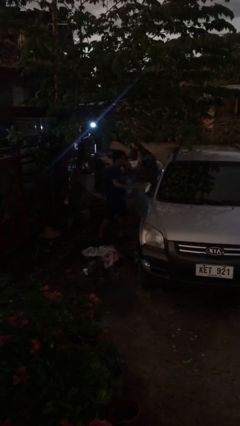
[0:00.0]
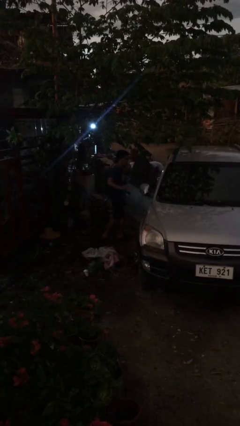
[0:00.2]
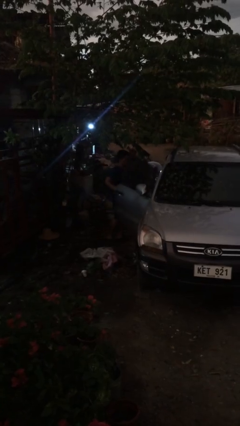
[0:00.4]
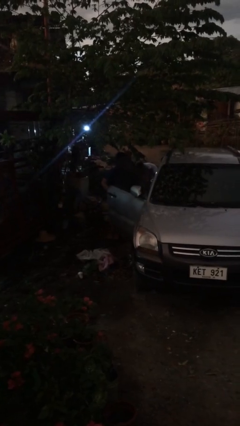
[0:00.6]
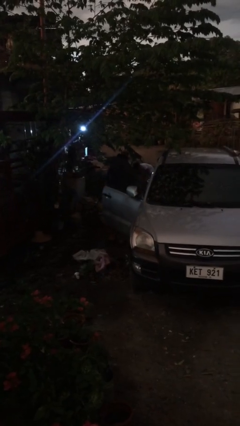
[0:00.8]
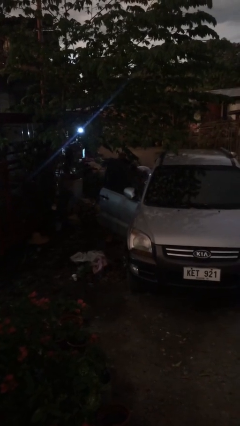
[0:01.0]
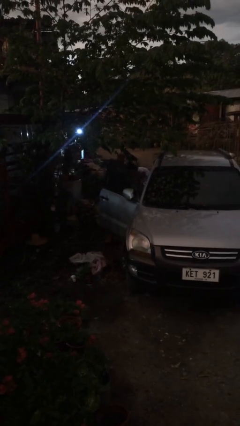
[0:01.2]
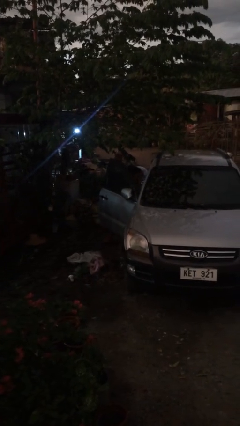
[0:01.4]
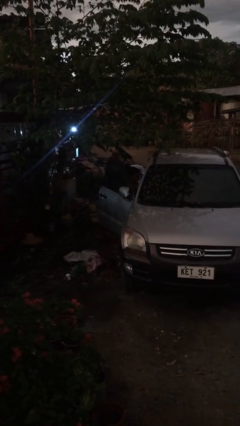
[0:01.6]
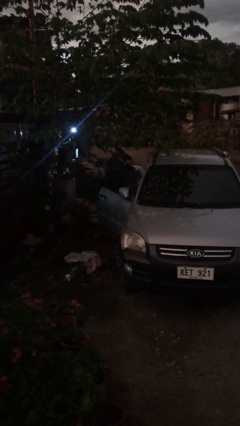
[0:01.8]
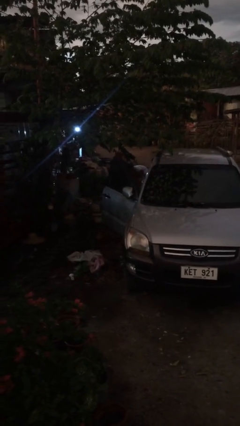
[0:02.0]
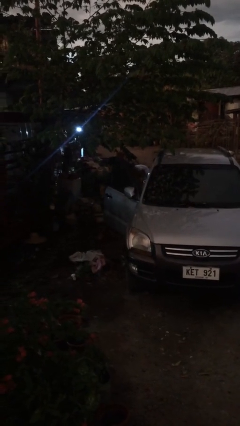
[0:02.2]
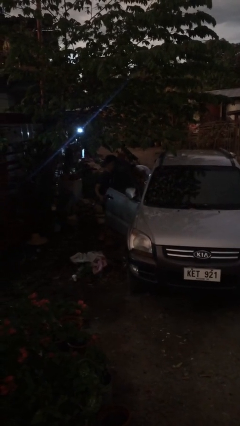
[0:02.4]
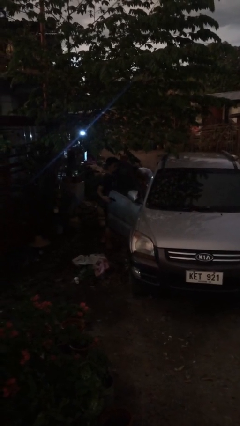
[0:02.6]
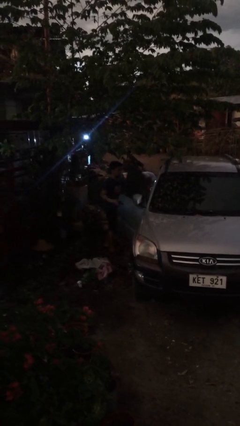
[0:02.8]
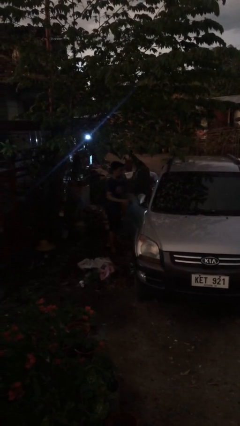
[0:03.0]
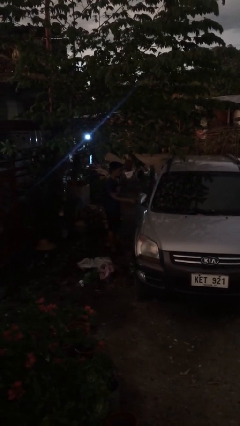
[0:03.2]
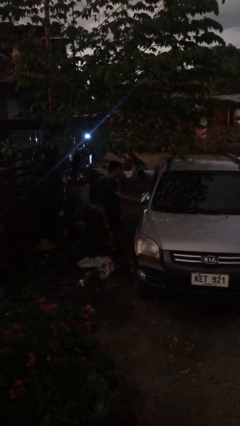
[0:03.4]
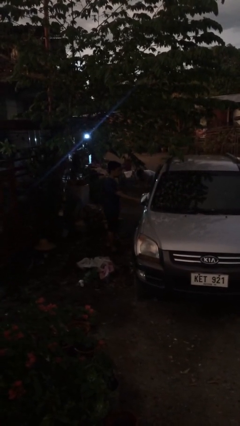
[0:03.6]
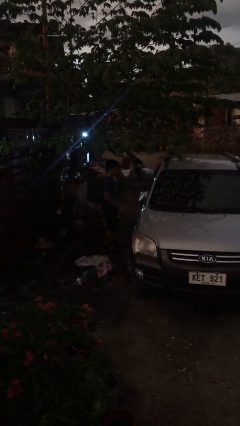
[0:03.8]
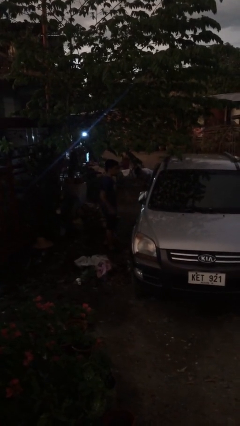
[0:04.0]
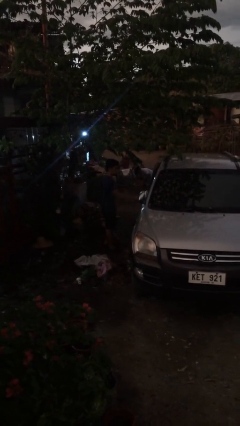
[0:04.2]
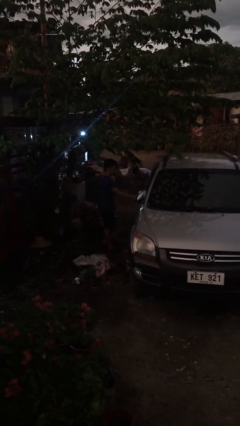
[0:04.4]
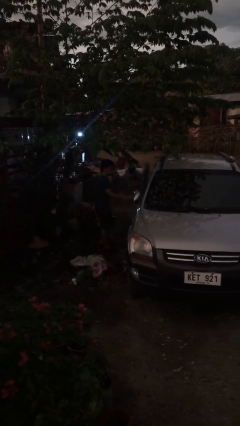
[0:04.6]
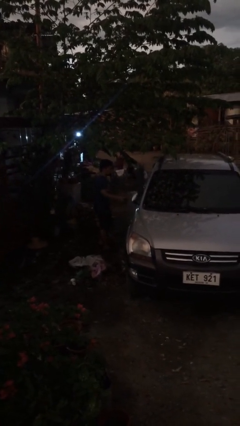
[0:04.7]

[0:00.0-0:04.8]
person loads car

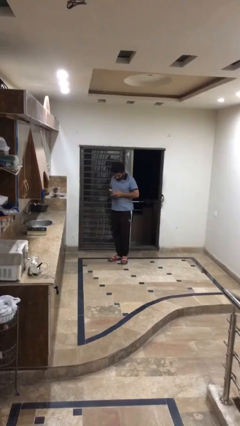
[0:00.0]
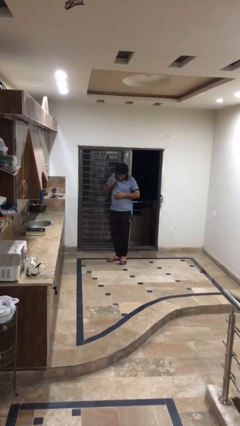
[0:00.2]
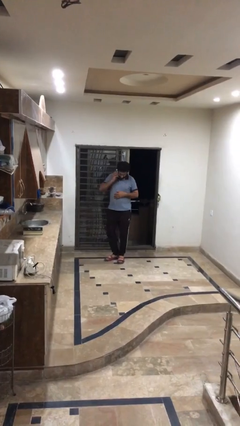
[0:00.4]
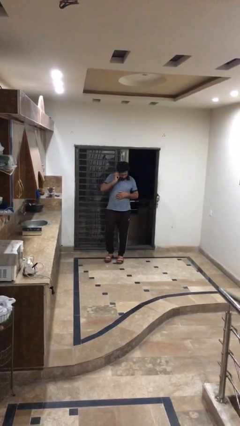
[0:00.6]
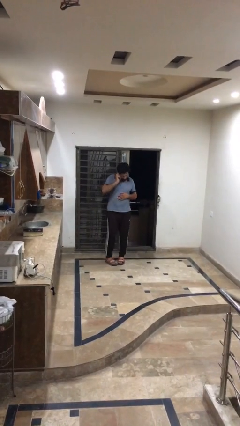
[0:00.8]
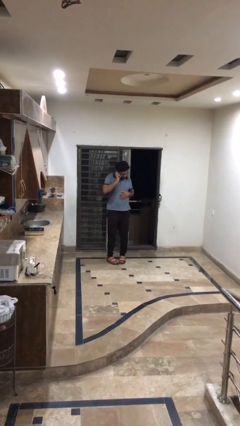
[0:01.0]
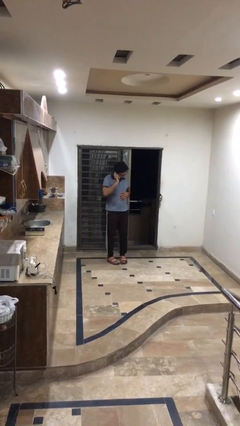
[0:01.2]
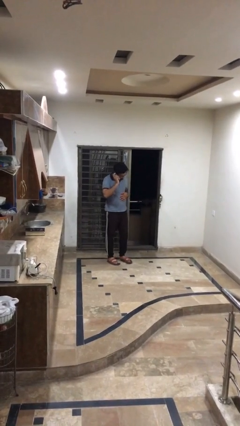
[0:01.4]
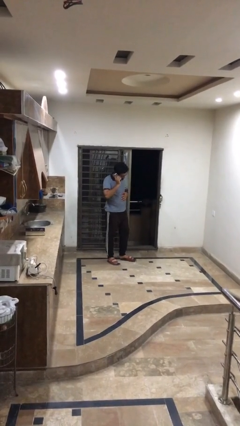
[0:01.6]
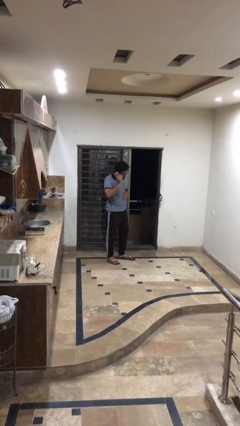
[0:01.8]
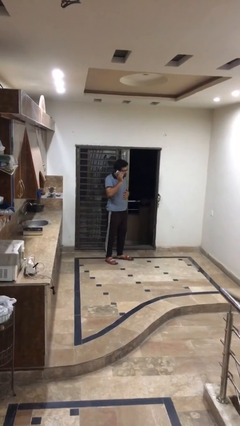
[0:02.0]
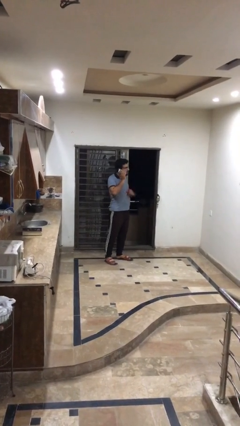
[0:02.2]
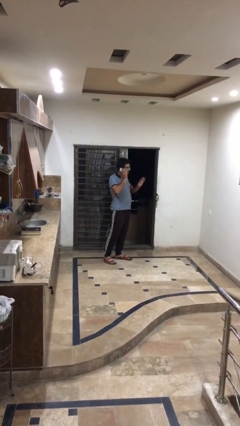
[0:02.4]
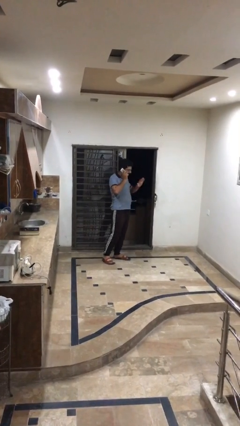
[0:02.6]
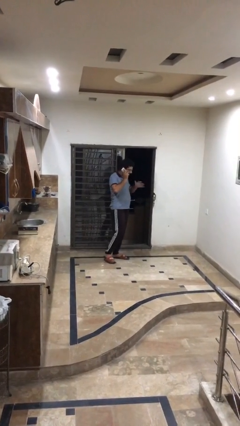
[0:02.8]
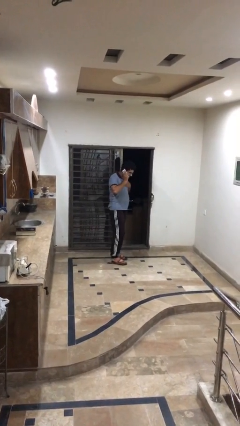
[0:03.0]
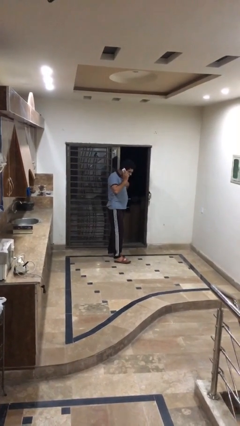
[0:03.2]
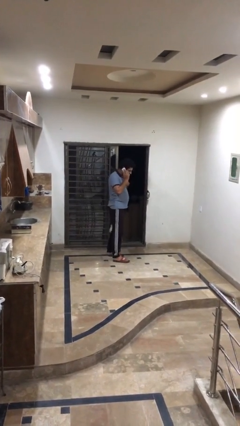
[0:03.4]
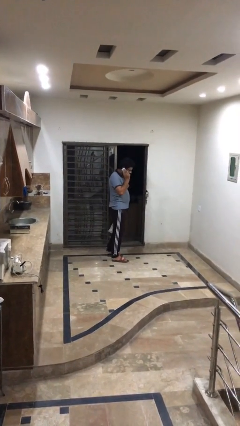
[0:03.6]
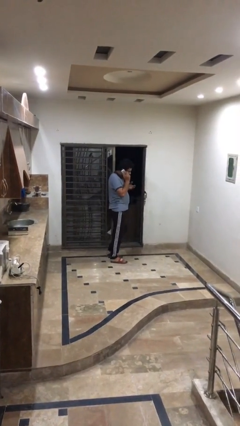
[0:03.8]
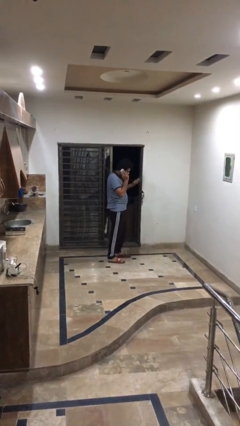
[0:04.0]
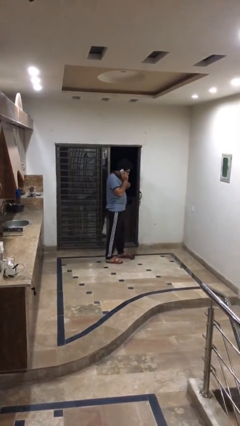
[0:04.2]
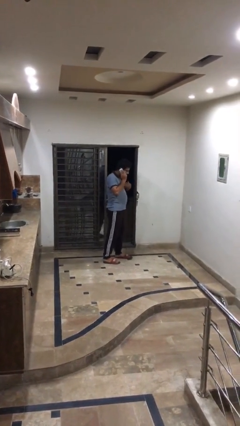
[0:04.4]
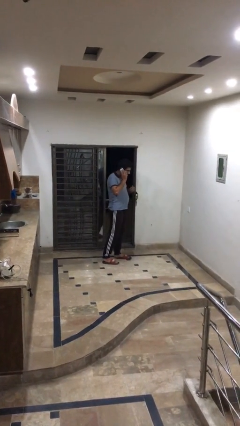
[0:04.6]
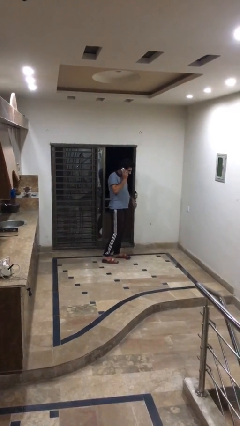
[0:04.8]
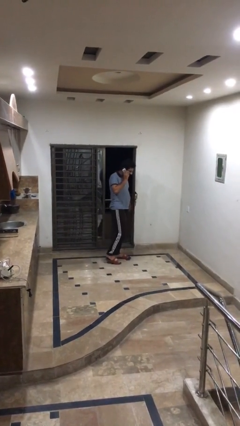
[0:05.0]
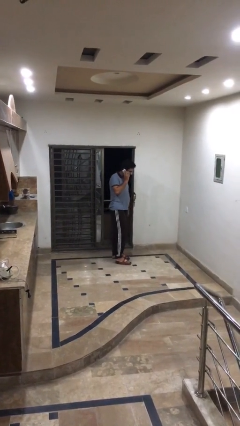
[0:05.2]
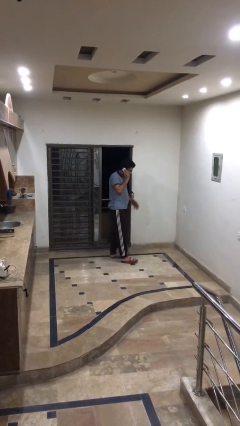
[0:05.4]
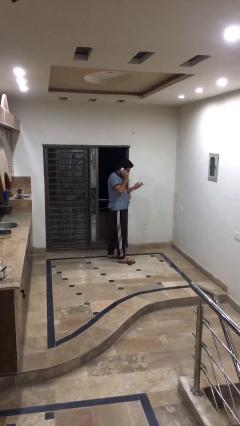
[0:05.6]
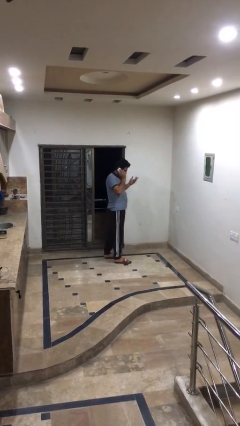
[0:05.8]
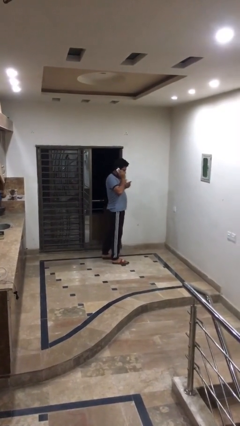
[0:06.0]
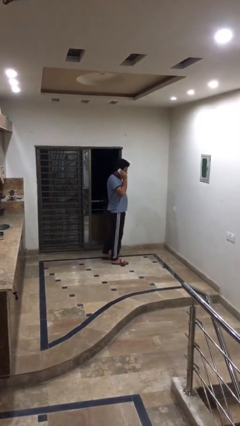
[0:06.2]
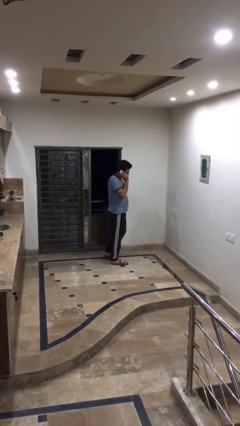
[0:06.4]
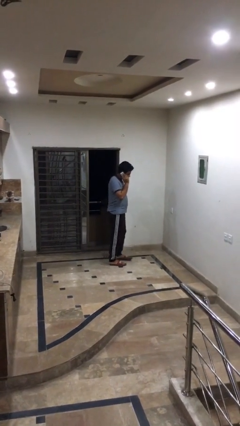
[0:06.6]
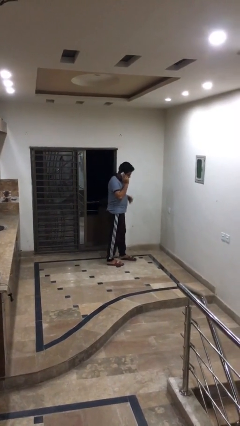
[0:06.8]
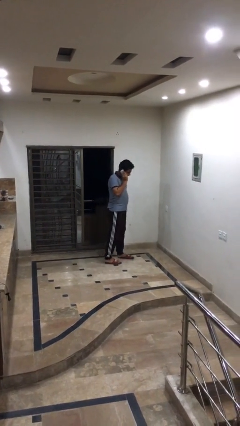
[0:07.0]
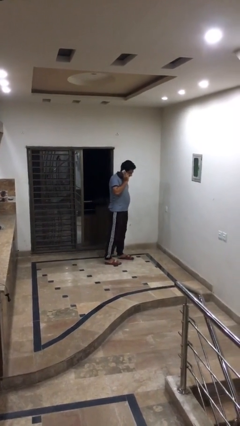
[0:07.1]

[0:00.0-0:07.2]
person talks on phone

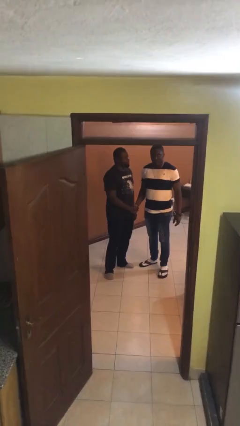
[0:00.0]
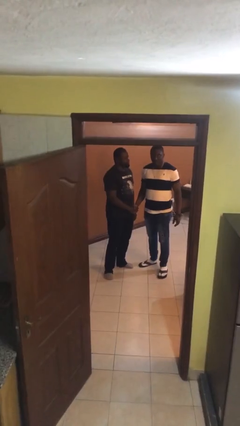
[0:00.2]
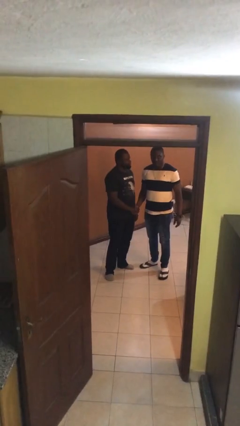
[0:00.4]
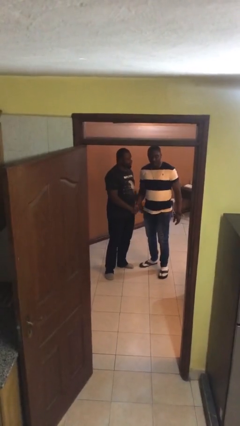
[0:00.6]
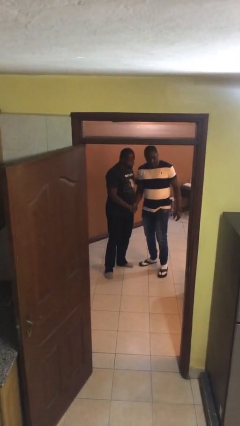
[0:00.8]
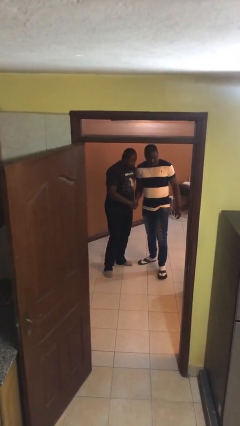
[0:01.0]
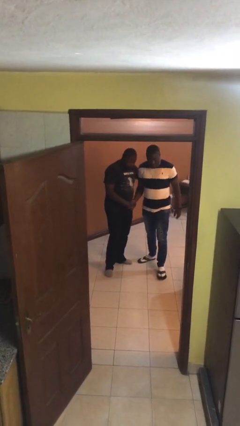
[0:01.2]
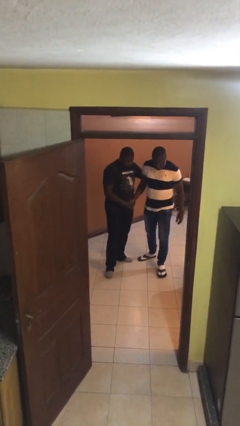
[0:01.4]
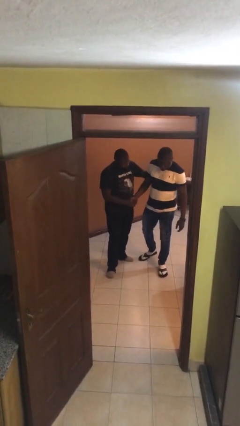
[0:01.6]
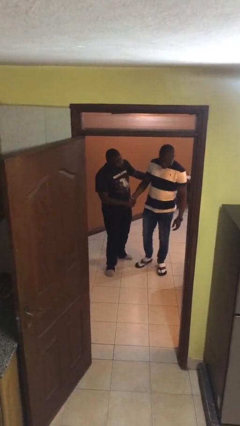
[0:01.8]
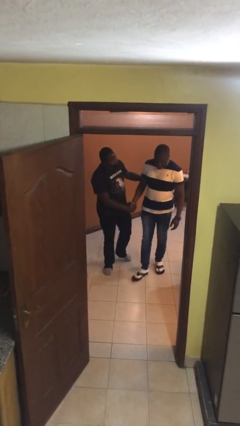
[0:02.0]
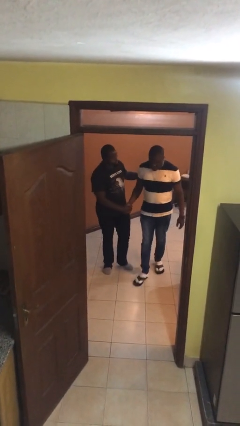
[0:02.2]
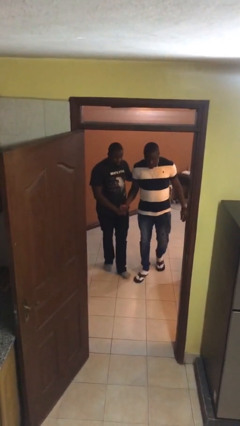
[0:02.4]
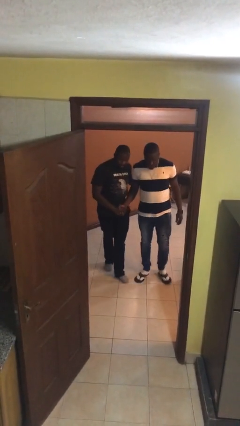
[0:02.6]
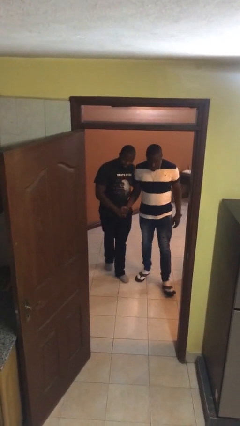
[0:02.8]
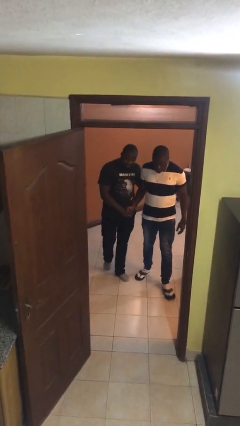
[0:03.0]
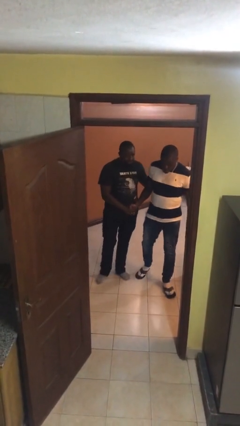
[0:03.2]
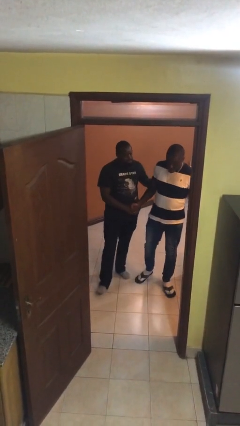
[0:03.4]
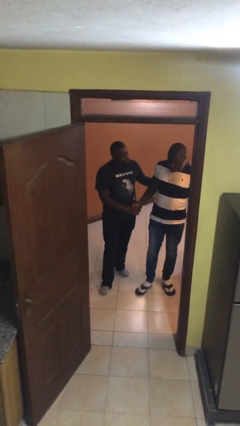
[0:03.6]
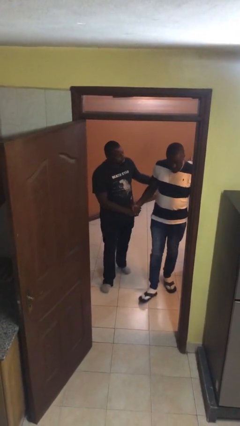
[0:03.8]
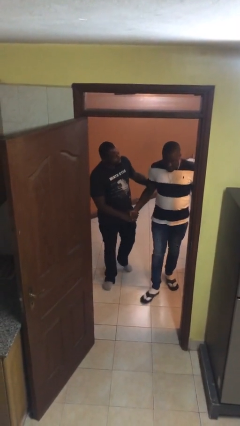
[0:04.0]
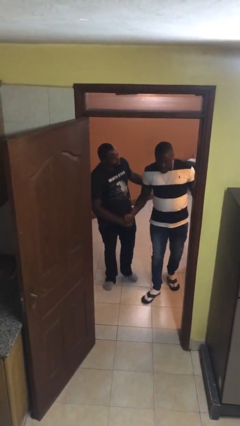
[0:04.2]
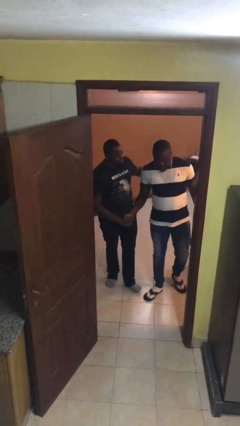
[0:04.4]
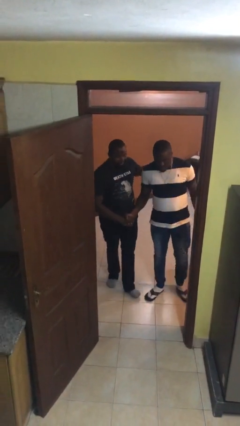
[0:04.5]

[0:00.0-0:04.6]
person holds hand

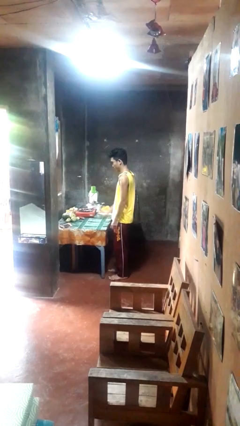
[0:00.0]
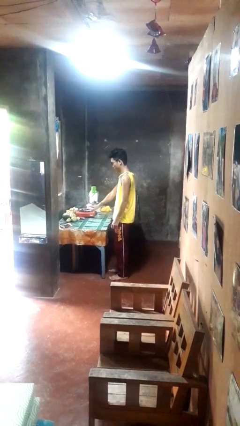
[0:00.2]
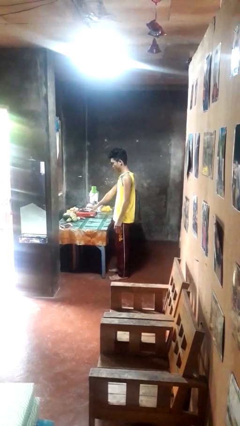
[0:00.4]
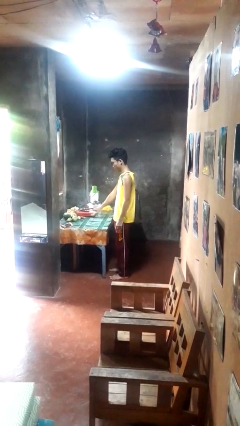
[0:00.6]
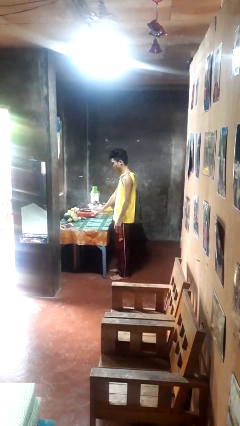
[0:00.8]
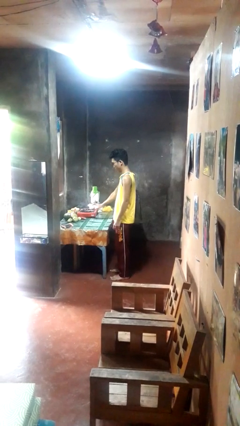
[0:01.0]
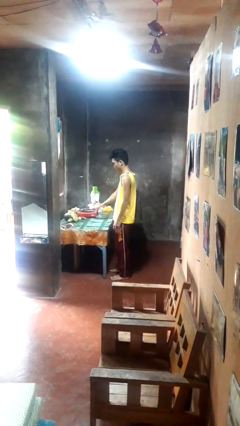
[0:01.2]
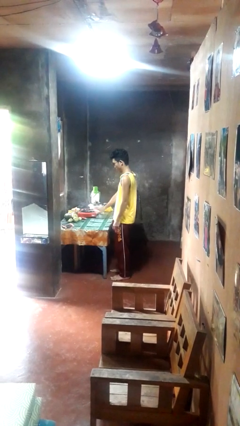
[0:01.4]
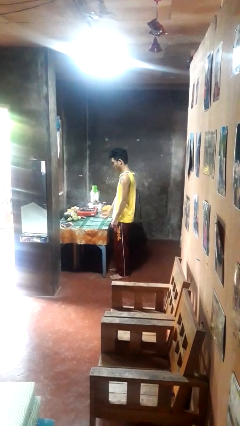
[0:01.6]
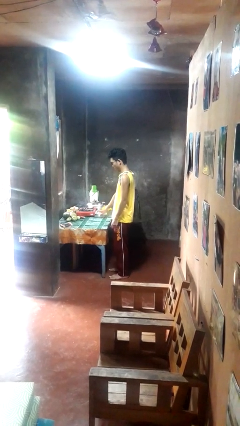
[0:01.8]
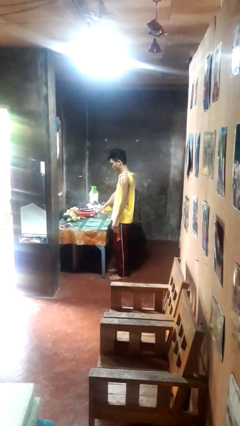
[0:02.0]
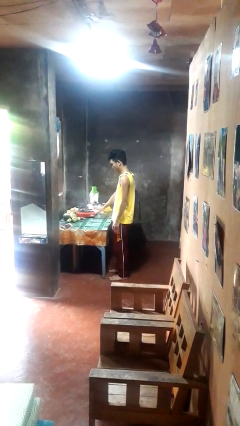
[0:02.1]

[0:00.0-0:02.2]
person sprays from bottle
